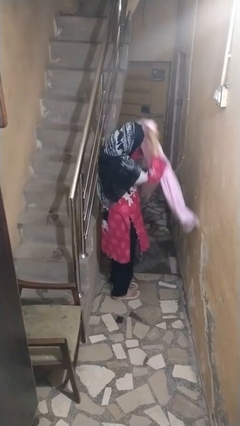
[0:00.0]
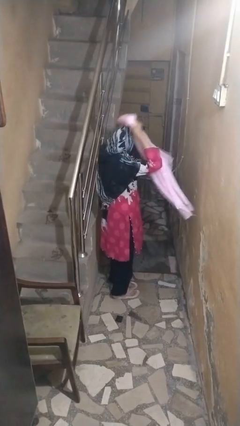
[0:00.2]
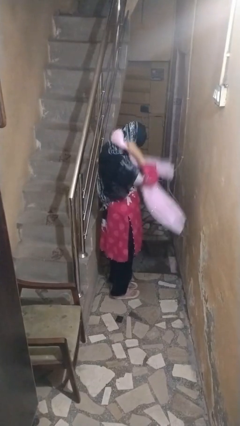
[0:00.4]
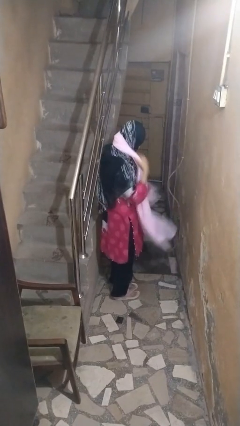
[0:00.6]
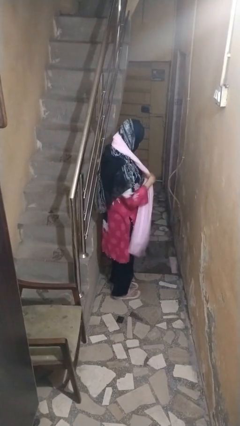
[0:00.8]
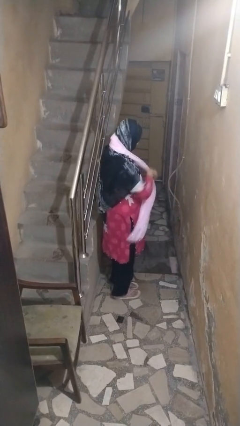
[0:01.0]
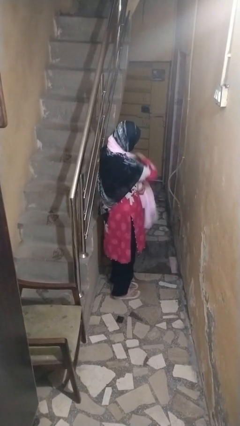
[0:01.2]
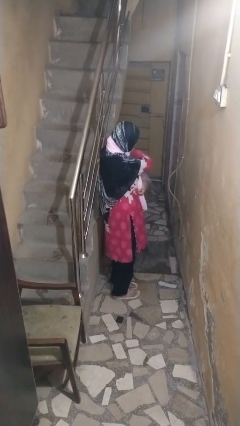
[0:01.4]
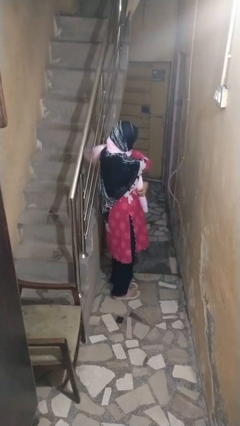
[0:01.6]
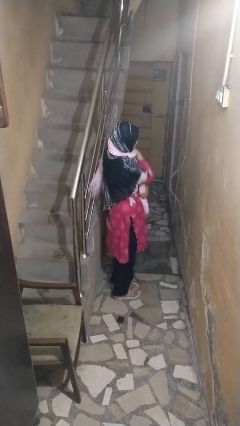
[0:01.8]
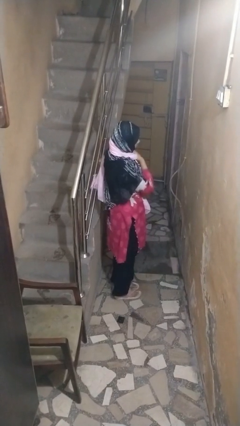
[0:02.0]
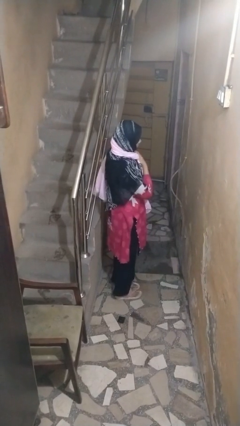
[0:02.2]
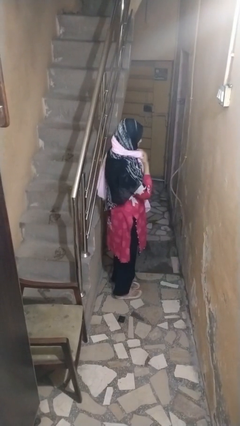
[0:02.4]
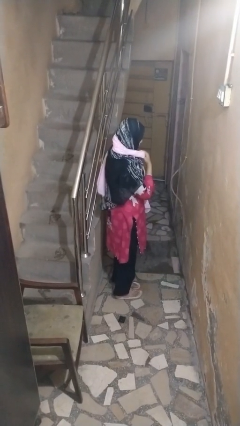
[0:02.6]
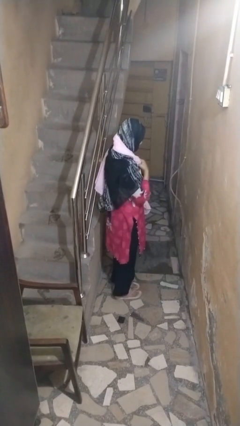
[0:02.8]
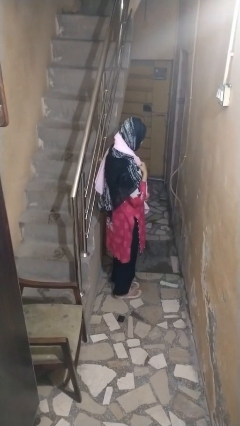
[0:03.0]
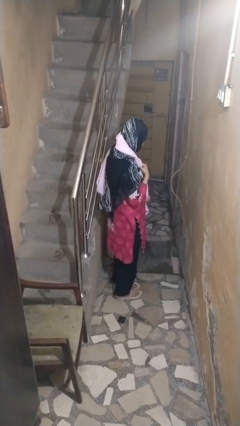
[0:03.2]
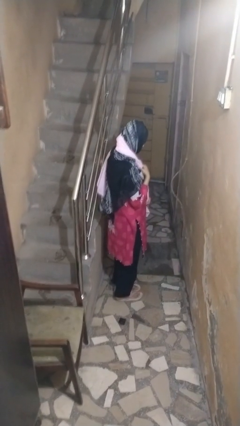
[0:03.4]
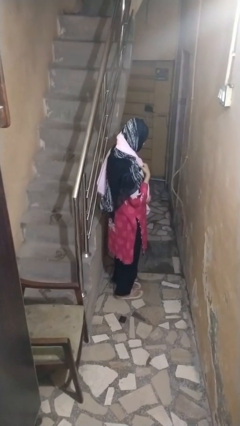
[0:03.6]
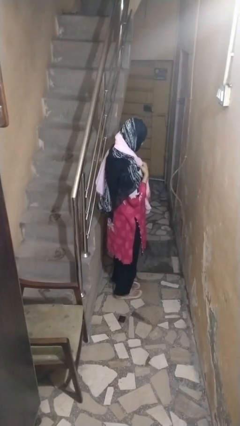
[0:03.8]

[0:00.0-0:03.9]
person puts on scarf

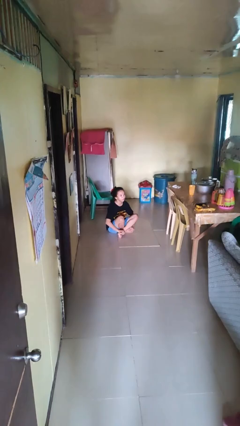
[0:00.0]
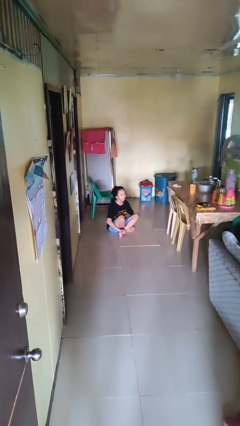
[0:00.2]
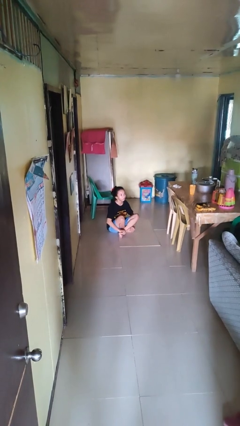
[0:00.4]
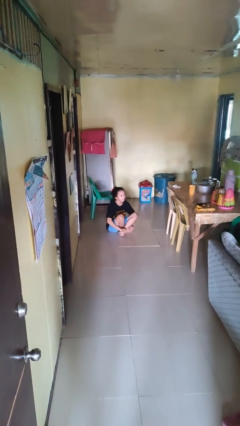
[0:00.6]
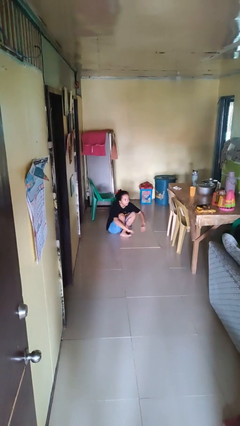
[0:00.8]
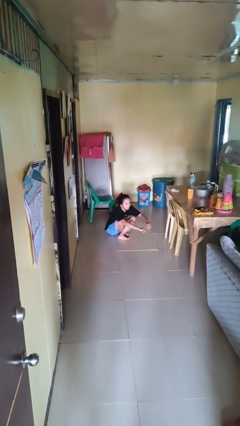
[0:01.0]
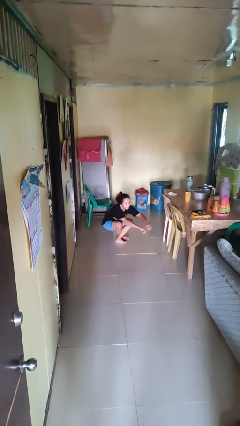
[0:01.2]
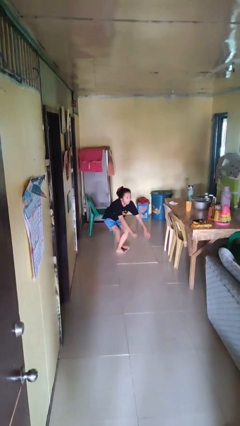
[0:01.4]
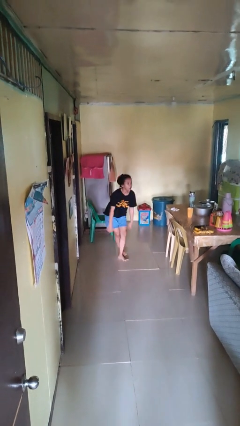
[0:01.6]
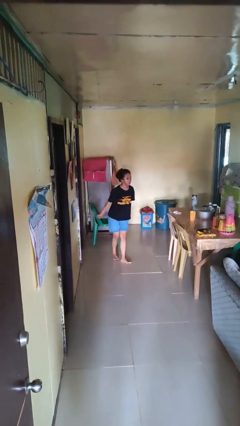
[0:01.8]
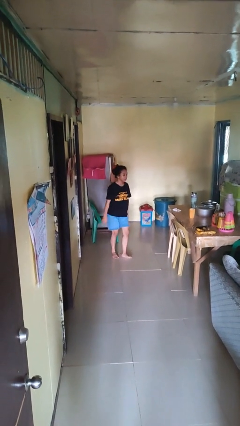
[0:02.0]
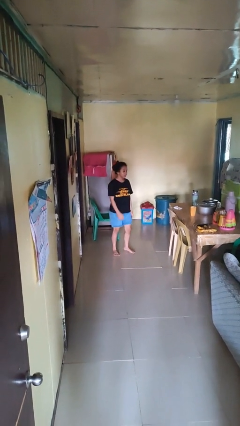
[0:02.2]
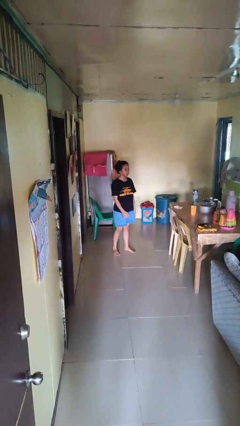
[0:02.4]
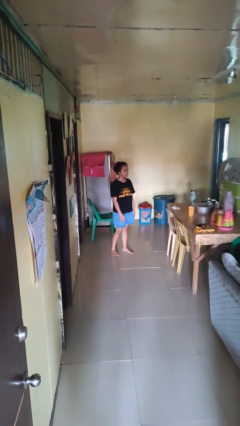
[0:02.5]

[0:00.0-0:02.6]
person stands up from floor

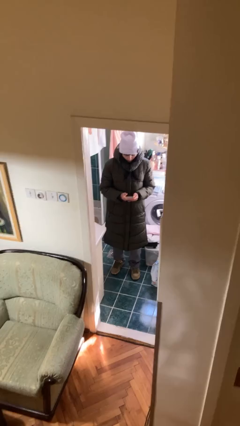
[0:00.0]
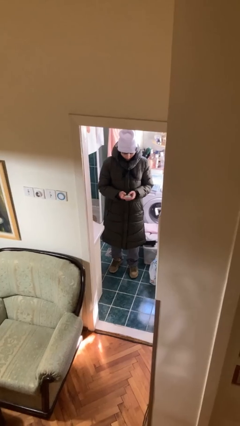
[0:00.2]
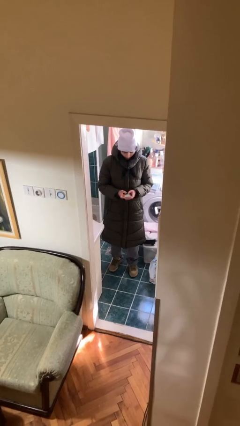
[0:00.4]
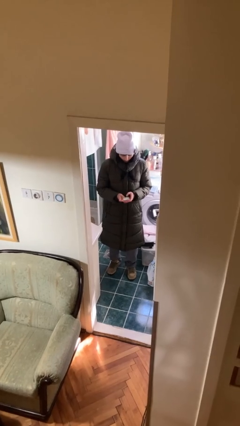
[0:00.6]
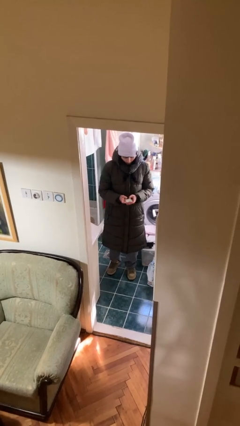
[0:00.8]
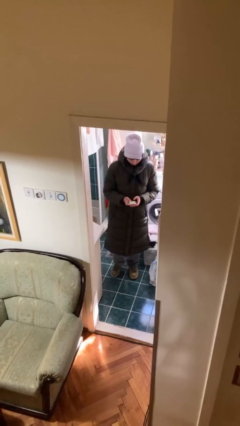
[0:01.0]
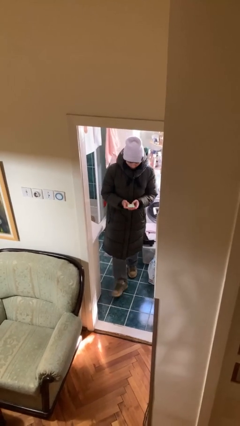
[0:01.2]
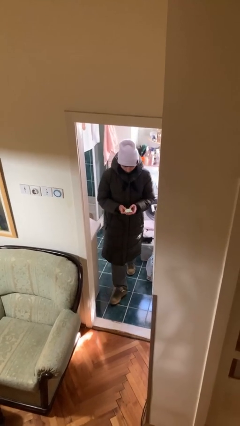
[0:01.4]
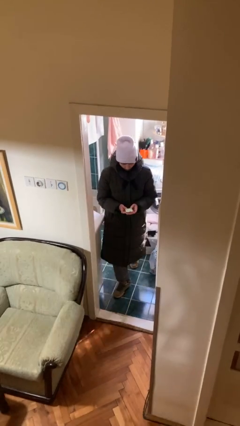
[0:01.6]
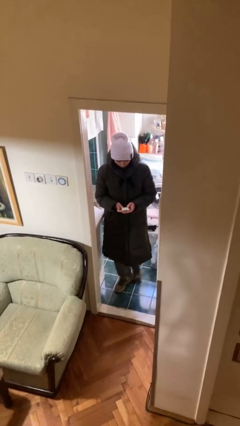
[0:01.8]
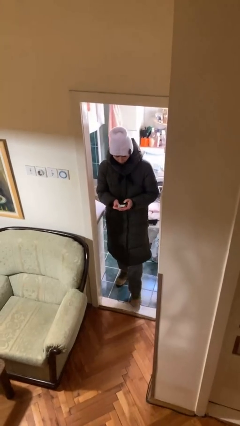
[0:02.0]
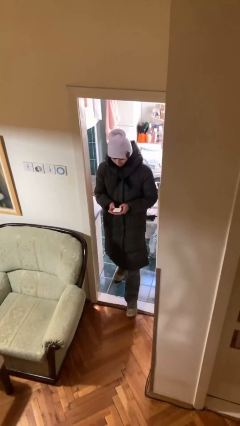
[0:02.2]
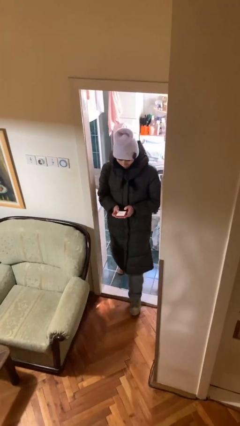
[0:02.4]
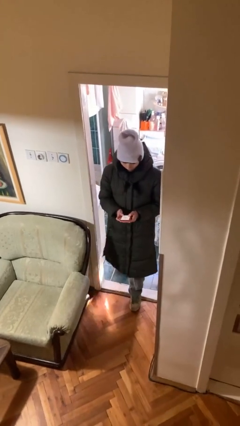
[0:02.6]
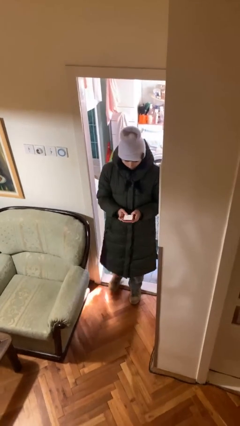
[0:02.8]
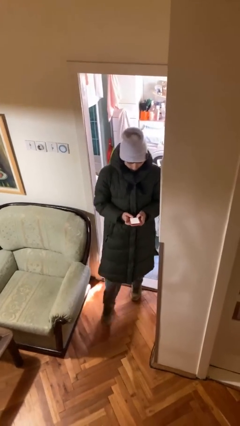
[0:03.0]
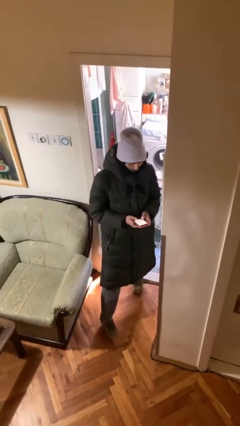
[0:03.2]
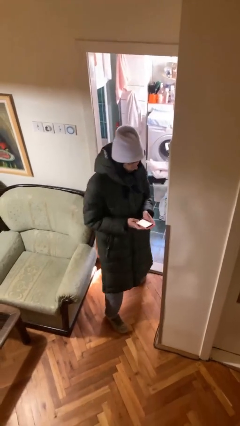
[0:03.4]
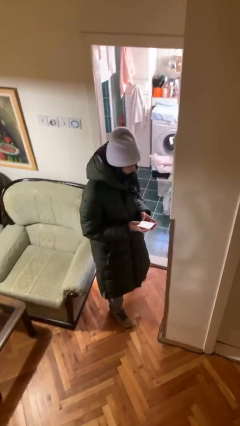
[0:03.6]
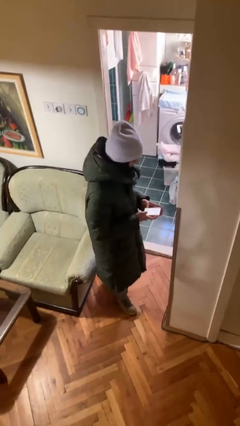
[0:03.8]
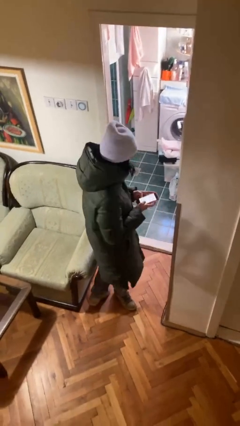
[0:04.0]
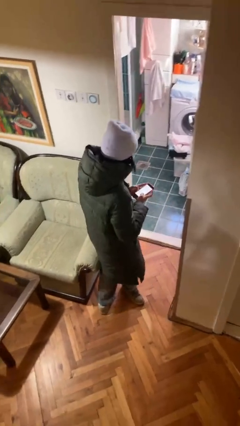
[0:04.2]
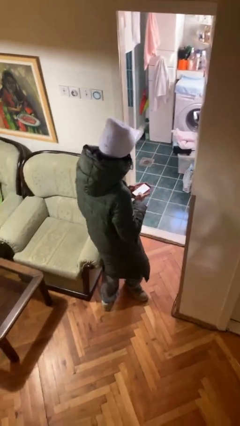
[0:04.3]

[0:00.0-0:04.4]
person enters scene through structure

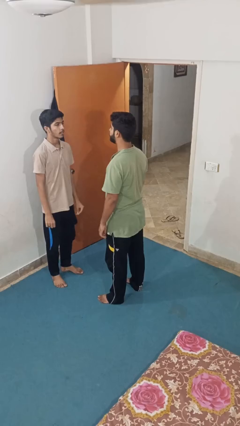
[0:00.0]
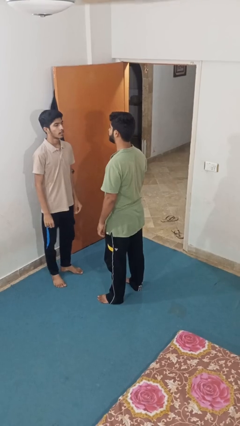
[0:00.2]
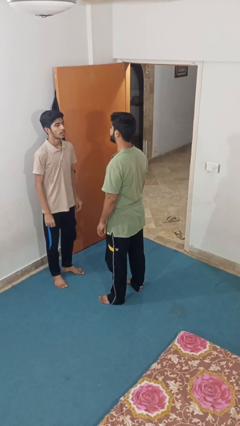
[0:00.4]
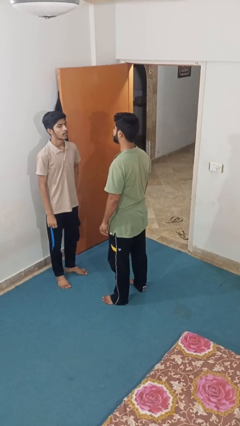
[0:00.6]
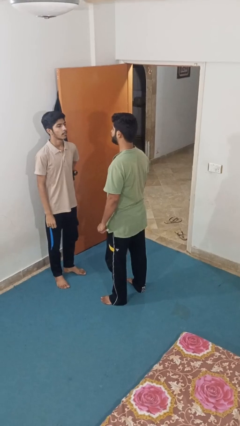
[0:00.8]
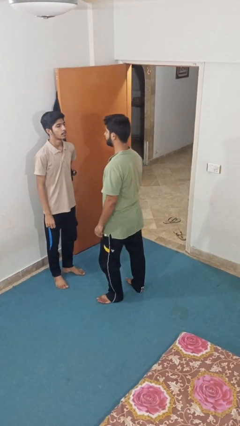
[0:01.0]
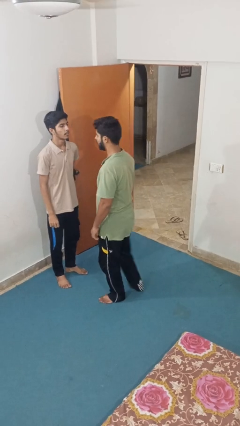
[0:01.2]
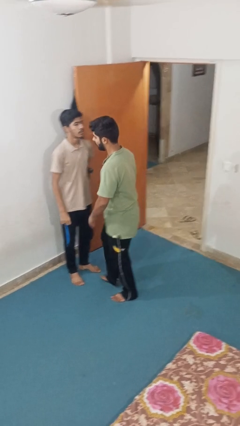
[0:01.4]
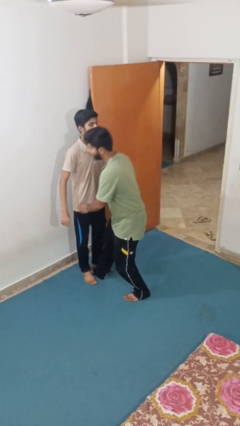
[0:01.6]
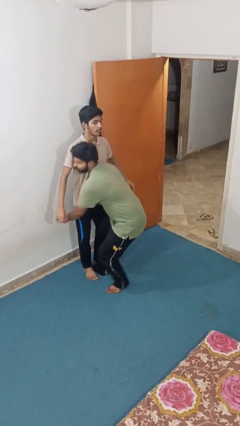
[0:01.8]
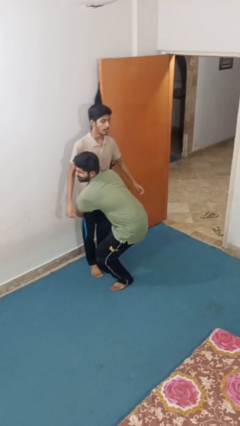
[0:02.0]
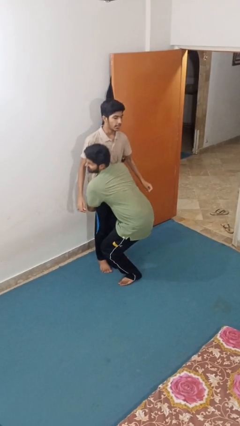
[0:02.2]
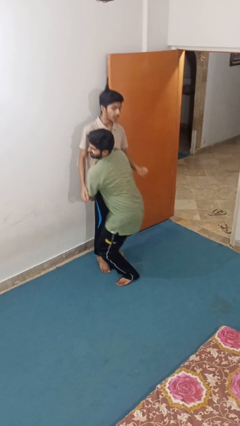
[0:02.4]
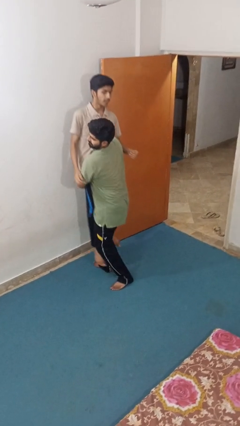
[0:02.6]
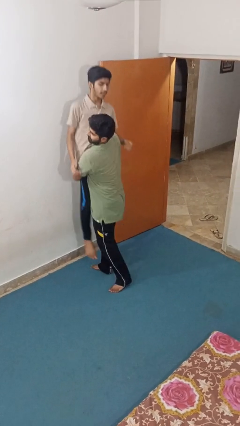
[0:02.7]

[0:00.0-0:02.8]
person picks up person

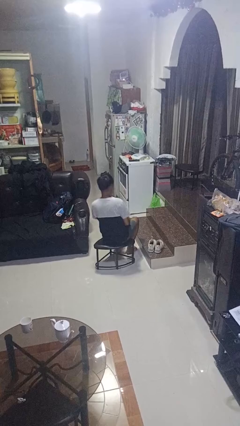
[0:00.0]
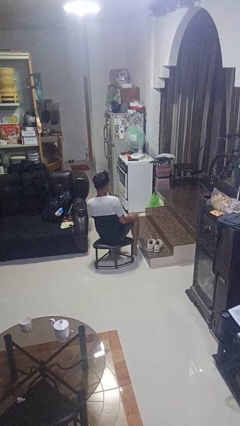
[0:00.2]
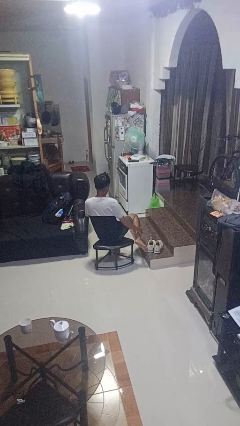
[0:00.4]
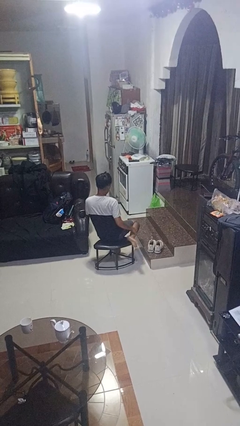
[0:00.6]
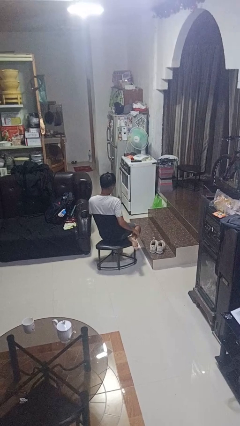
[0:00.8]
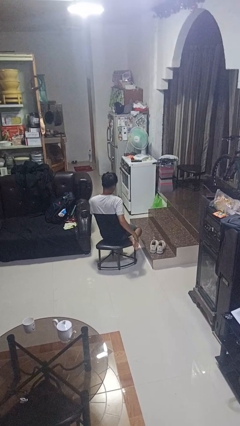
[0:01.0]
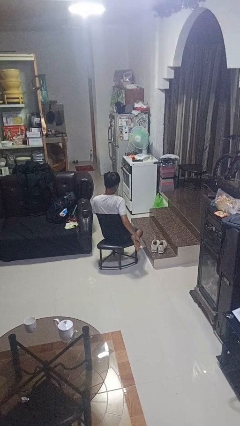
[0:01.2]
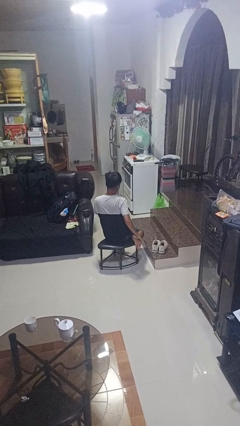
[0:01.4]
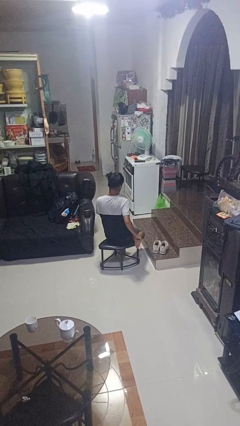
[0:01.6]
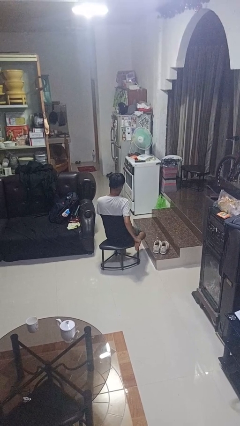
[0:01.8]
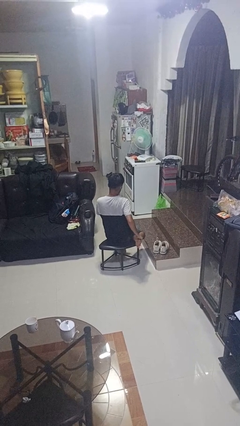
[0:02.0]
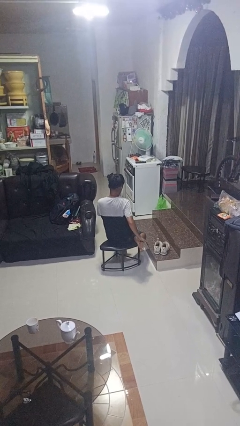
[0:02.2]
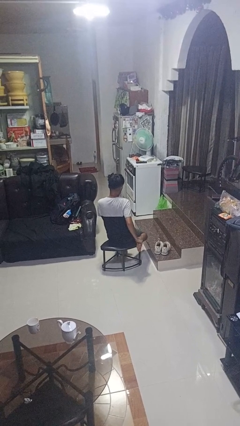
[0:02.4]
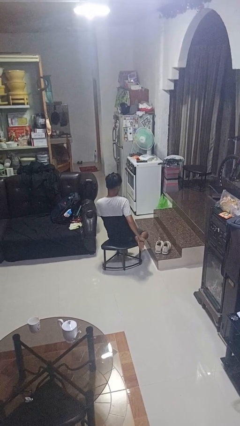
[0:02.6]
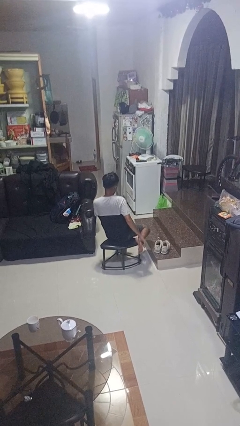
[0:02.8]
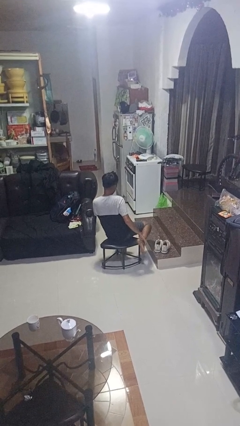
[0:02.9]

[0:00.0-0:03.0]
person rubs foot

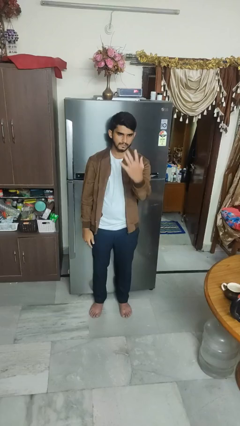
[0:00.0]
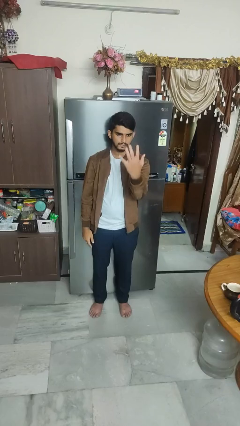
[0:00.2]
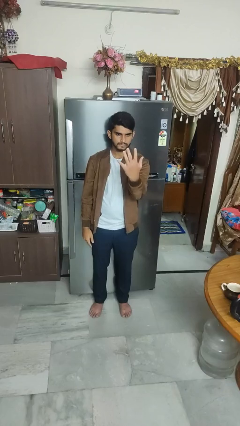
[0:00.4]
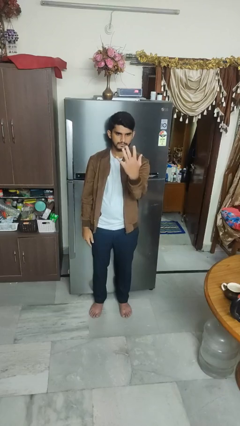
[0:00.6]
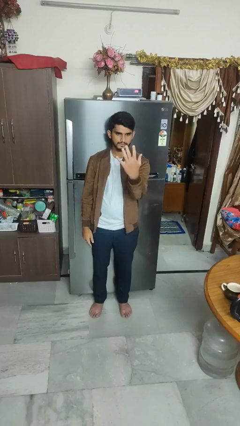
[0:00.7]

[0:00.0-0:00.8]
person gestures number five
